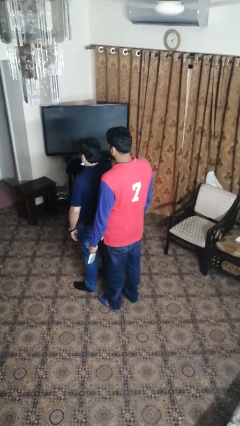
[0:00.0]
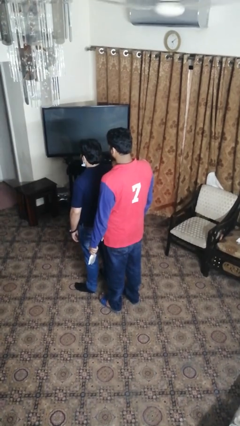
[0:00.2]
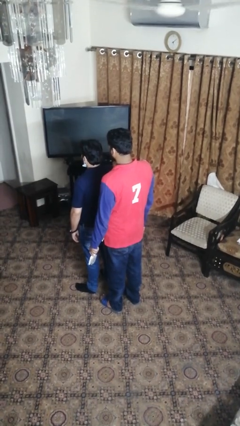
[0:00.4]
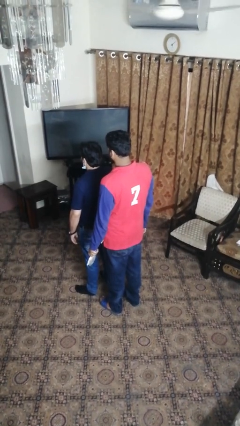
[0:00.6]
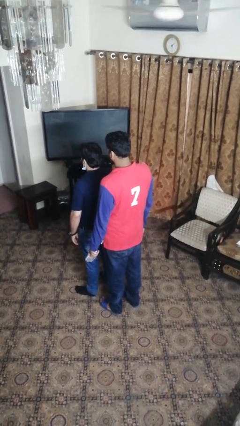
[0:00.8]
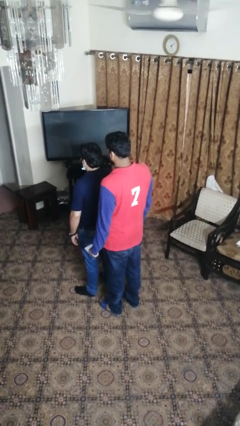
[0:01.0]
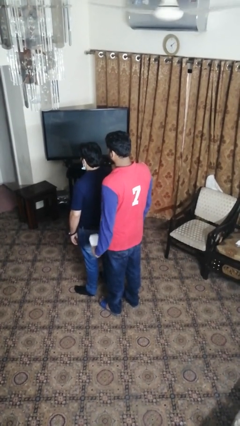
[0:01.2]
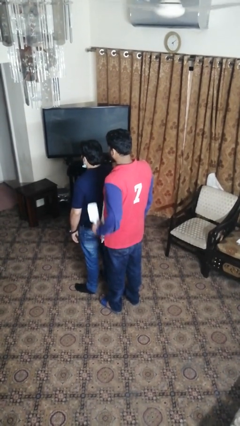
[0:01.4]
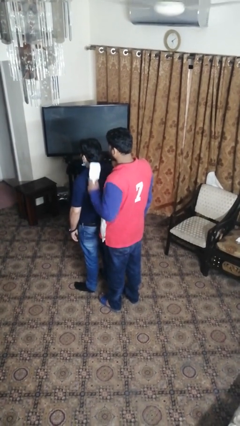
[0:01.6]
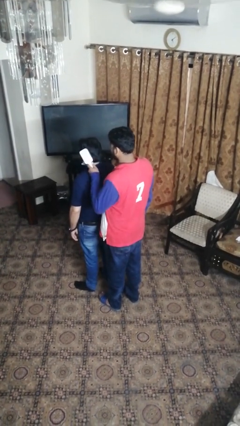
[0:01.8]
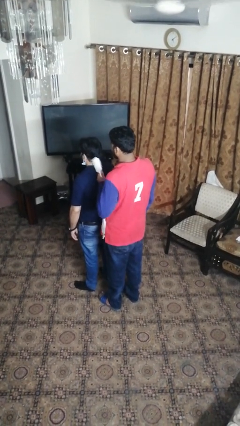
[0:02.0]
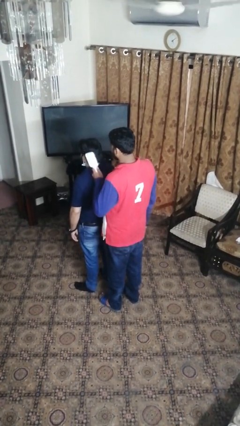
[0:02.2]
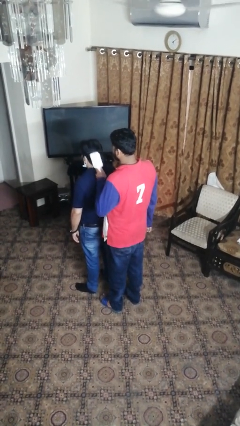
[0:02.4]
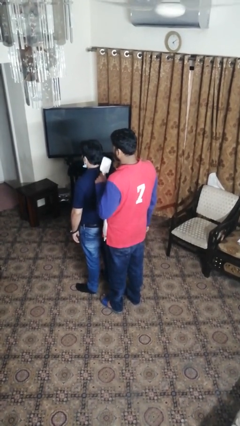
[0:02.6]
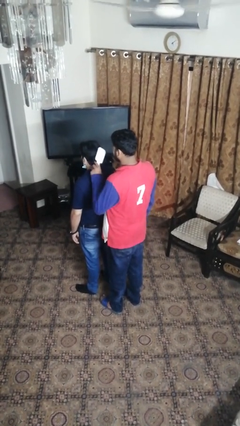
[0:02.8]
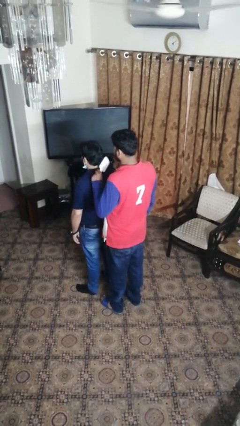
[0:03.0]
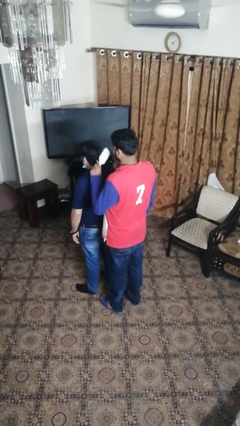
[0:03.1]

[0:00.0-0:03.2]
person brushes hair of person

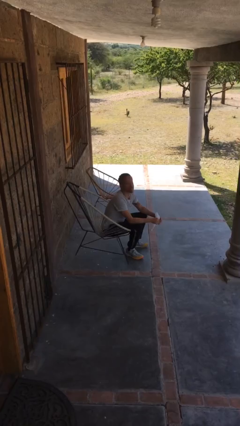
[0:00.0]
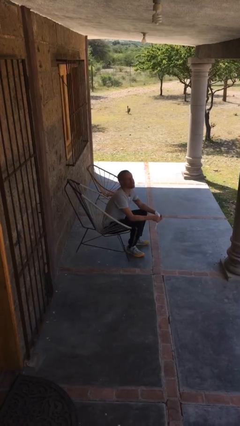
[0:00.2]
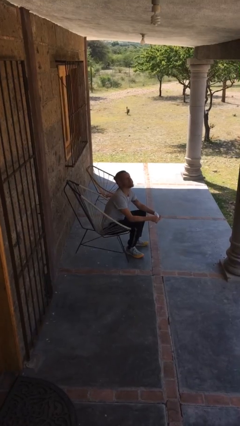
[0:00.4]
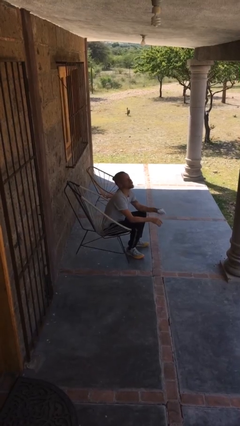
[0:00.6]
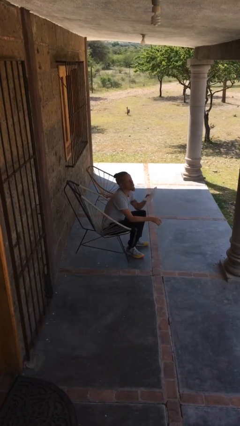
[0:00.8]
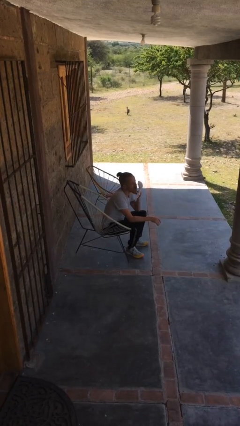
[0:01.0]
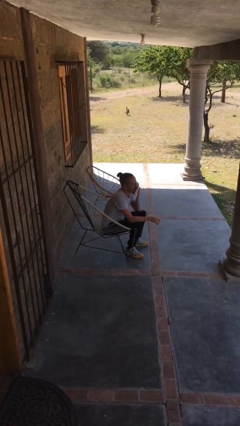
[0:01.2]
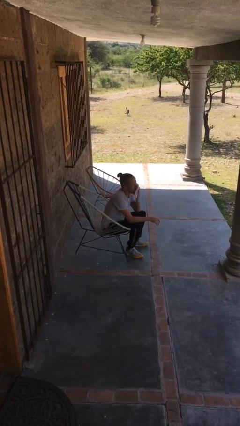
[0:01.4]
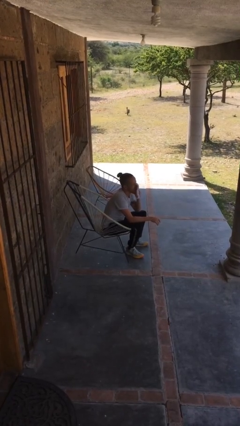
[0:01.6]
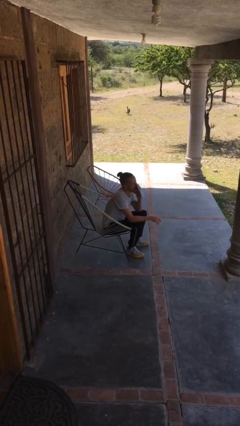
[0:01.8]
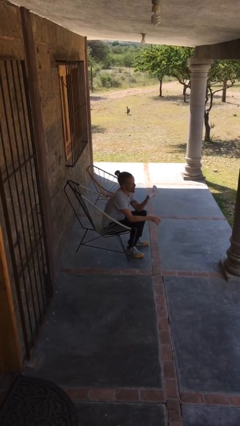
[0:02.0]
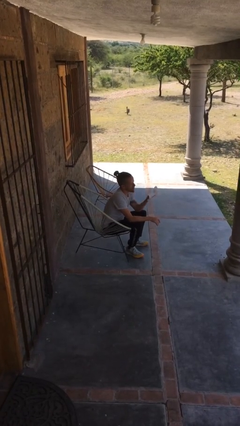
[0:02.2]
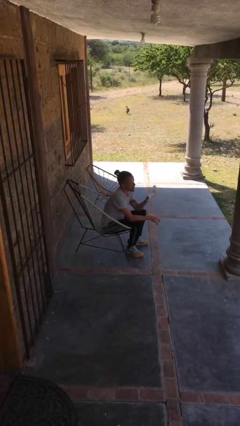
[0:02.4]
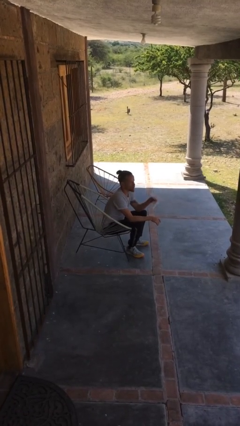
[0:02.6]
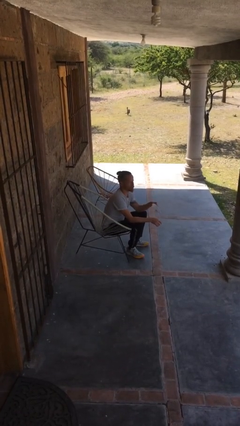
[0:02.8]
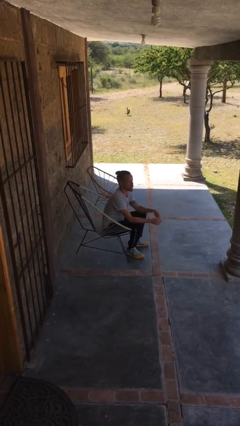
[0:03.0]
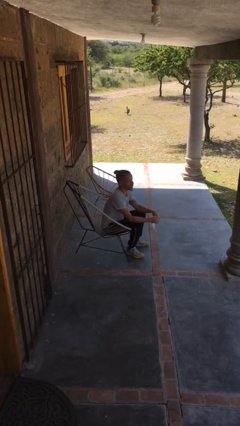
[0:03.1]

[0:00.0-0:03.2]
person wipes mouth with napkin

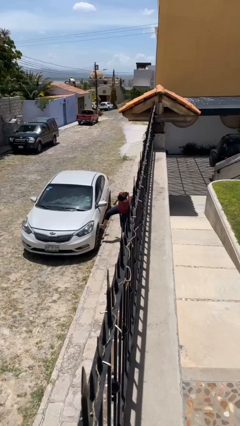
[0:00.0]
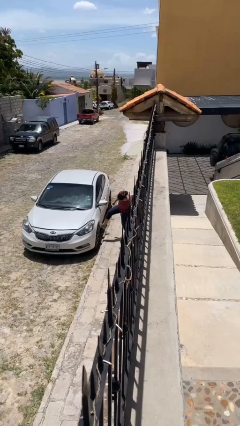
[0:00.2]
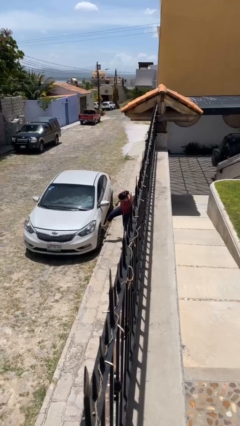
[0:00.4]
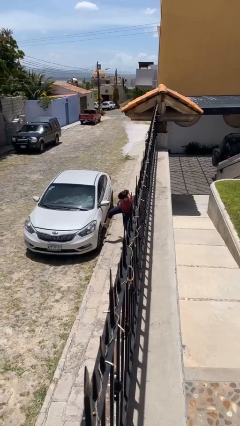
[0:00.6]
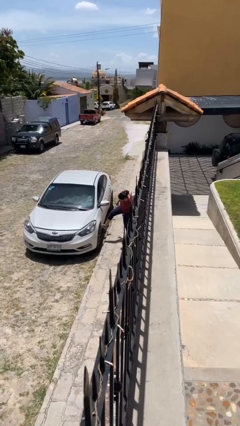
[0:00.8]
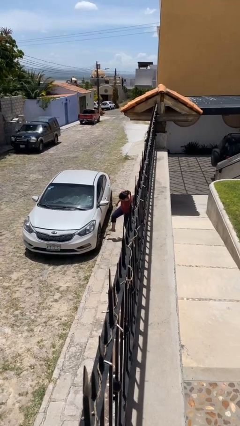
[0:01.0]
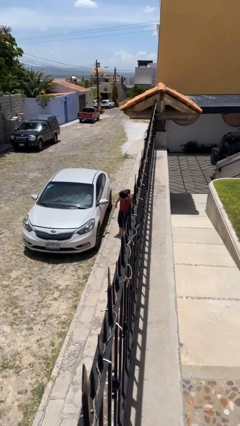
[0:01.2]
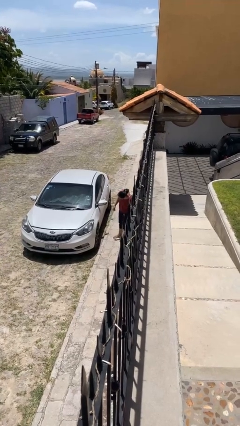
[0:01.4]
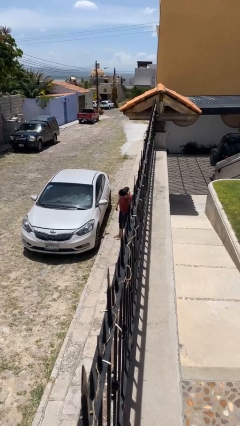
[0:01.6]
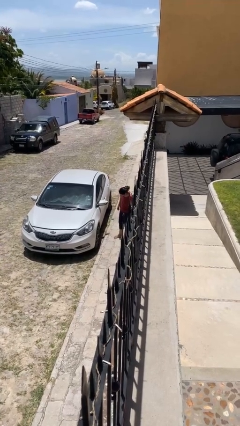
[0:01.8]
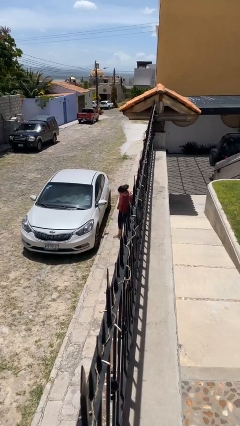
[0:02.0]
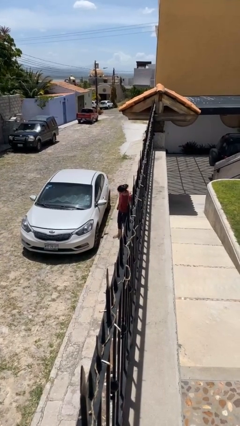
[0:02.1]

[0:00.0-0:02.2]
person kicks car tires

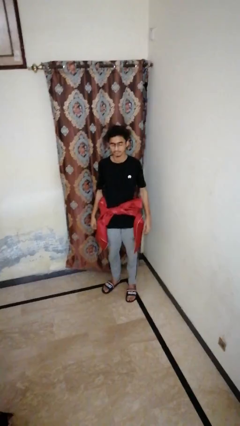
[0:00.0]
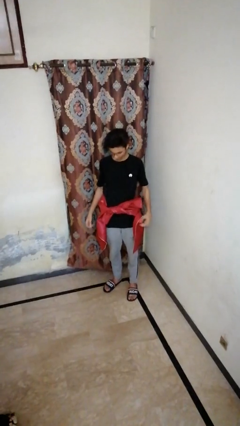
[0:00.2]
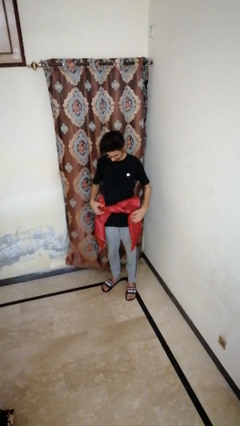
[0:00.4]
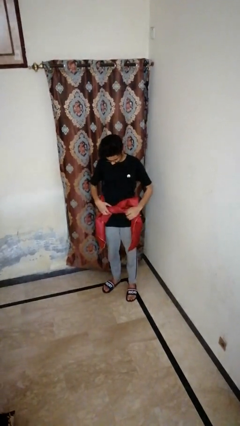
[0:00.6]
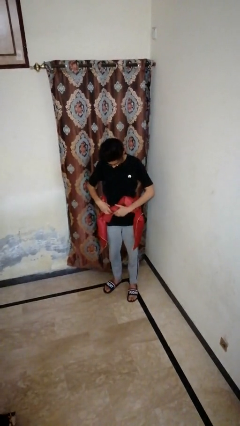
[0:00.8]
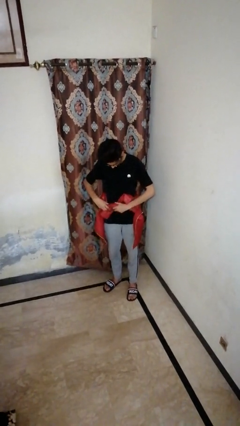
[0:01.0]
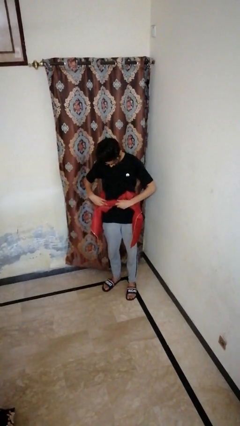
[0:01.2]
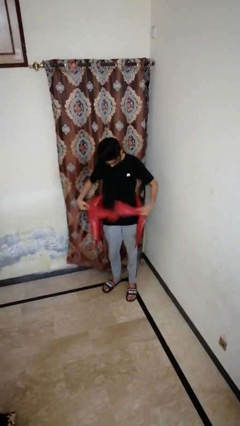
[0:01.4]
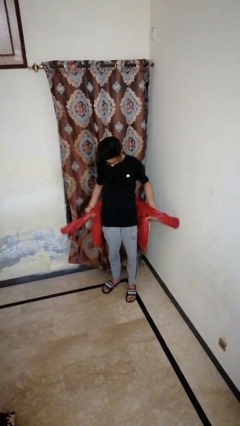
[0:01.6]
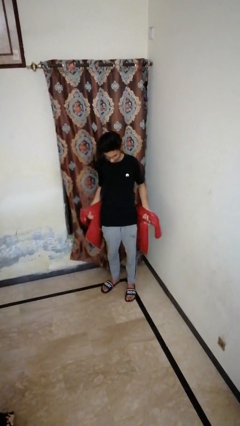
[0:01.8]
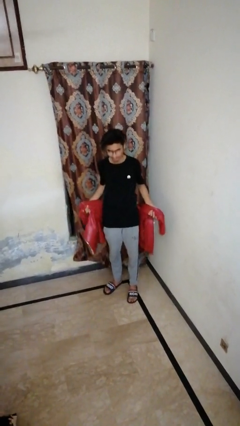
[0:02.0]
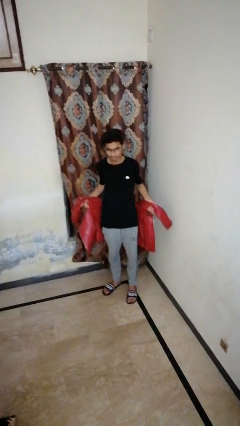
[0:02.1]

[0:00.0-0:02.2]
person unties jacket around waist

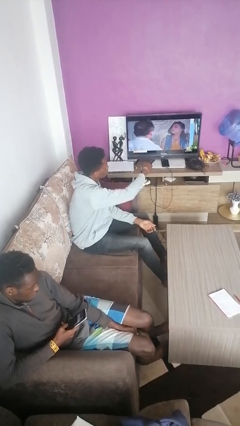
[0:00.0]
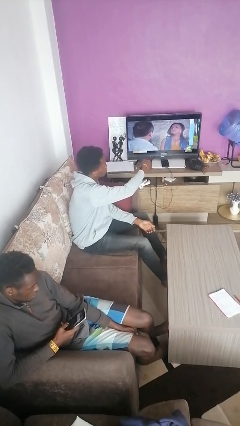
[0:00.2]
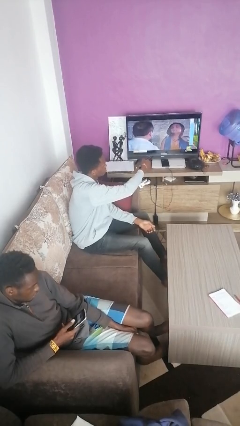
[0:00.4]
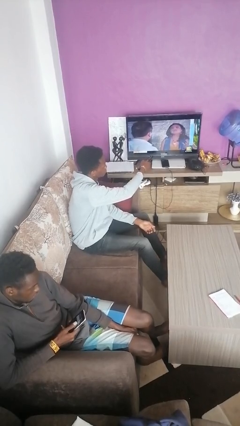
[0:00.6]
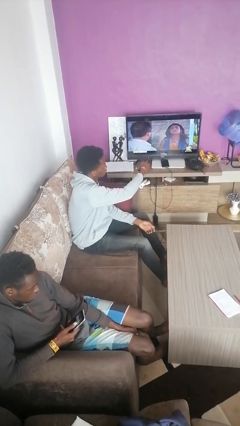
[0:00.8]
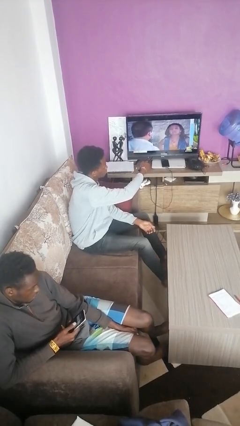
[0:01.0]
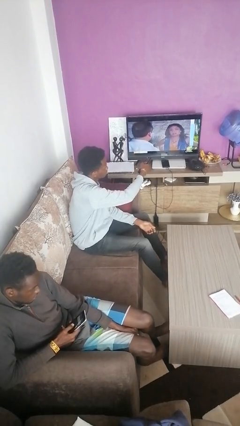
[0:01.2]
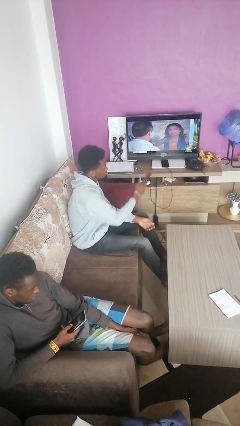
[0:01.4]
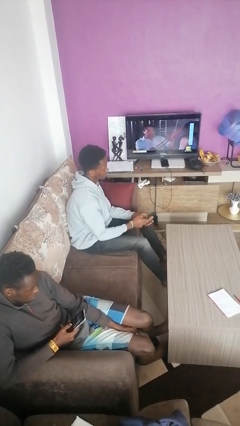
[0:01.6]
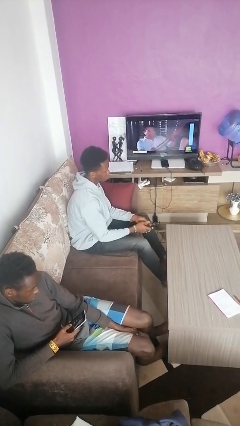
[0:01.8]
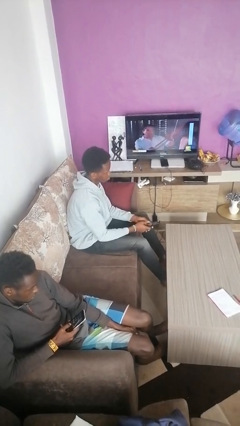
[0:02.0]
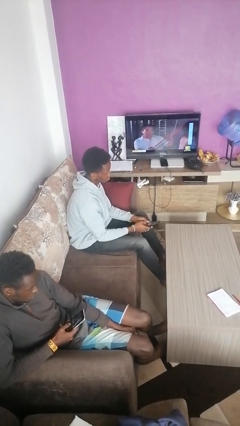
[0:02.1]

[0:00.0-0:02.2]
person uses television remote

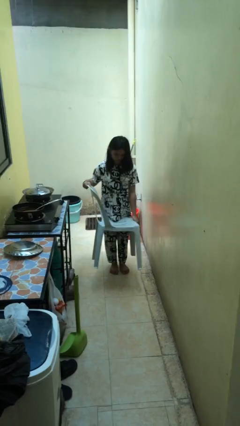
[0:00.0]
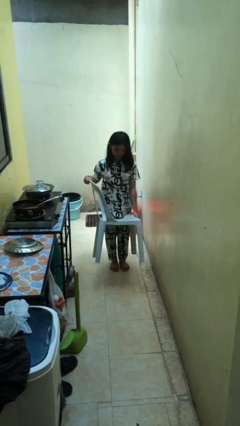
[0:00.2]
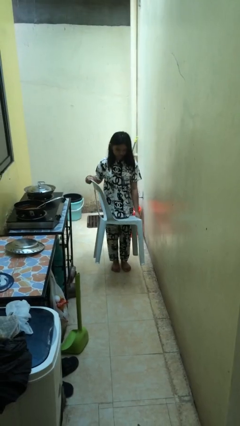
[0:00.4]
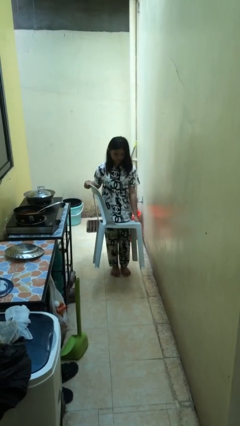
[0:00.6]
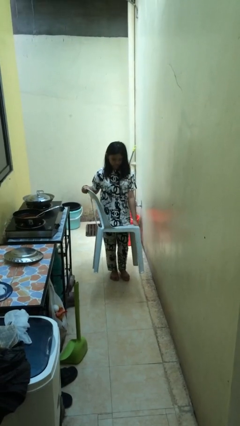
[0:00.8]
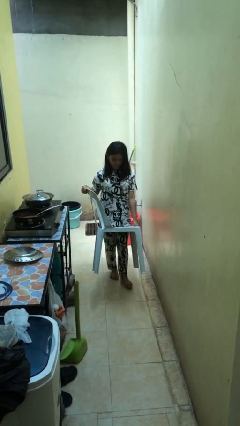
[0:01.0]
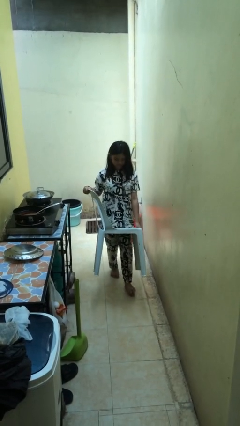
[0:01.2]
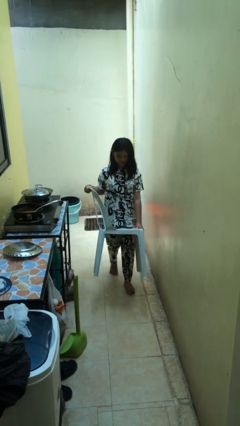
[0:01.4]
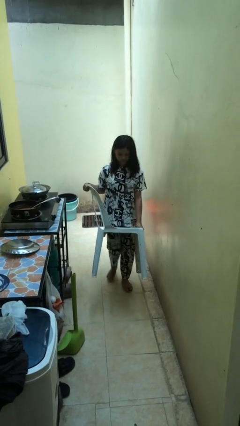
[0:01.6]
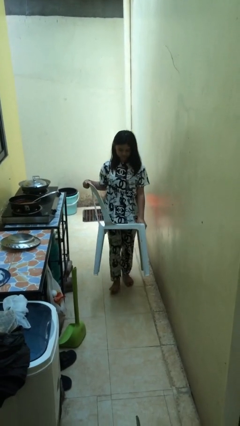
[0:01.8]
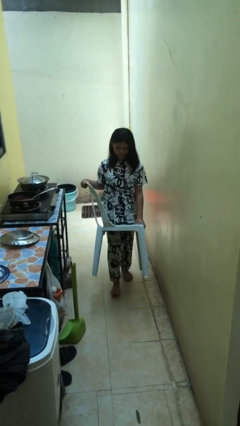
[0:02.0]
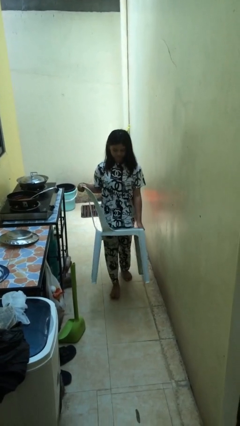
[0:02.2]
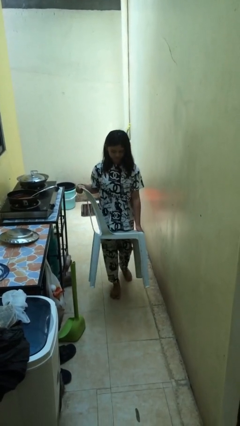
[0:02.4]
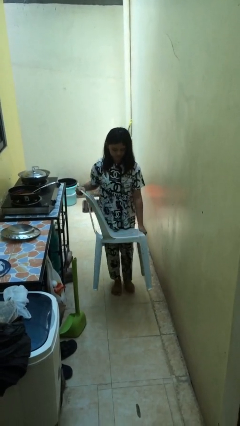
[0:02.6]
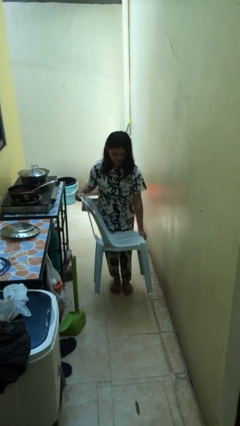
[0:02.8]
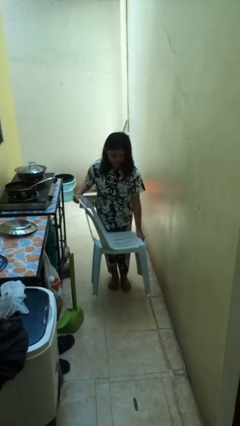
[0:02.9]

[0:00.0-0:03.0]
person carries heavy object

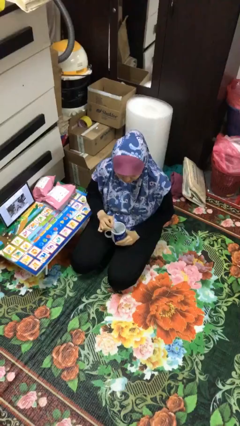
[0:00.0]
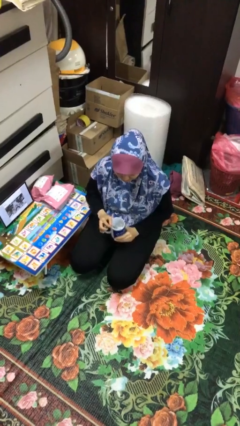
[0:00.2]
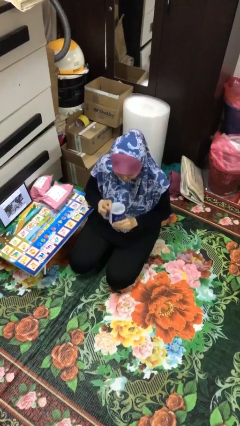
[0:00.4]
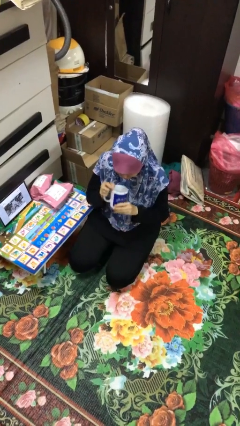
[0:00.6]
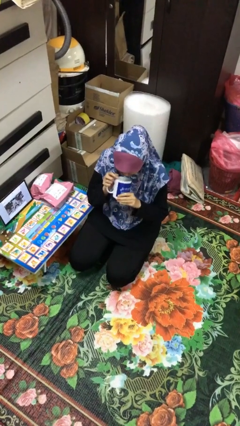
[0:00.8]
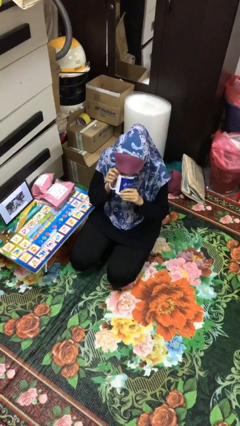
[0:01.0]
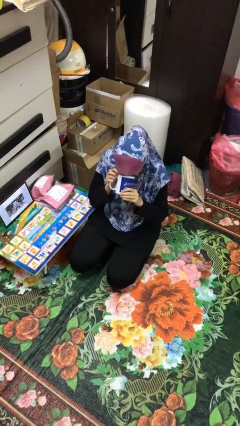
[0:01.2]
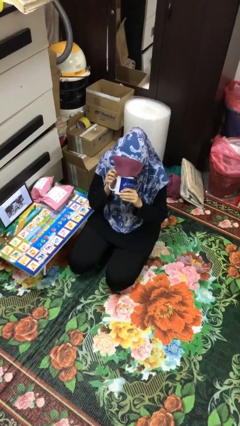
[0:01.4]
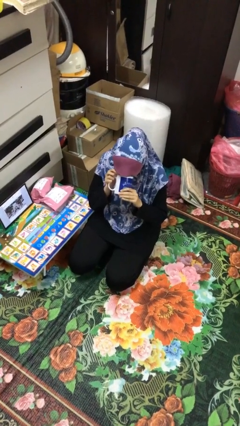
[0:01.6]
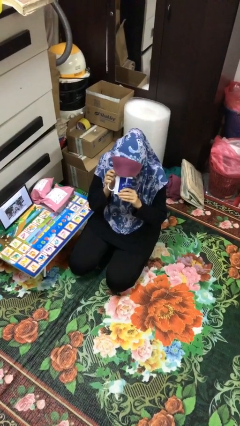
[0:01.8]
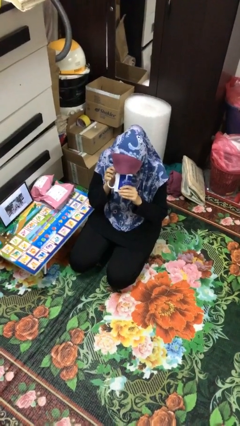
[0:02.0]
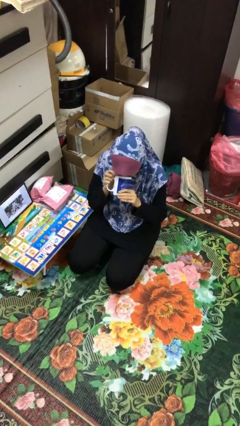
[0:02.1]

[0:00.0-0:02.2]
person drinks from mug
